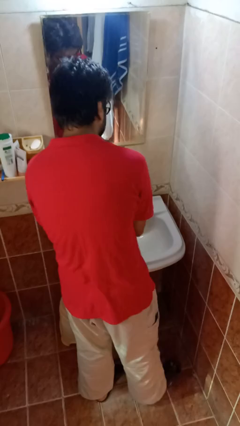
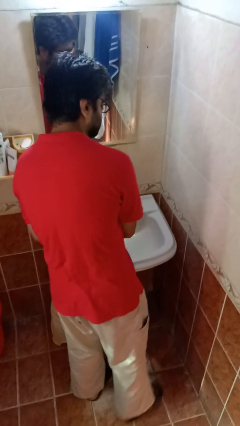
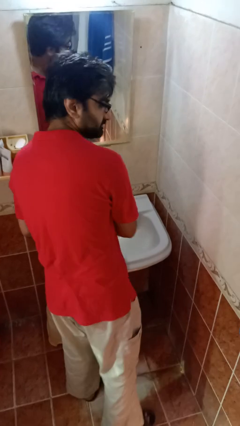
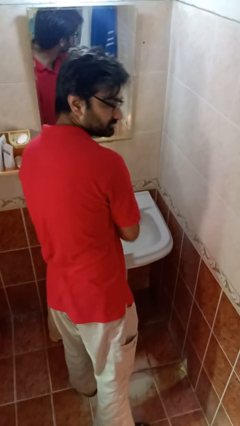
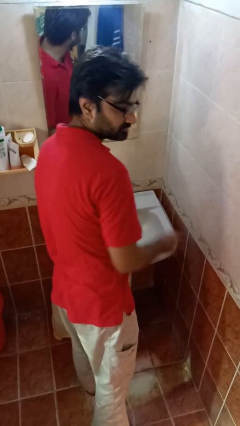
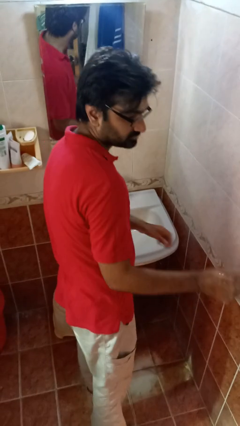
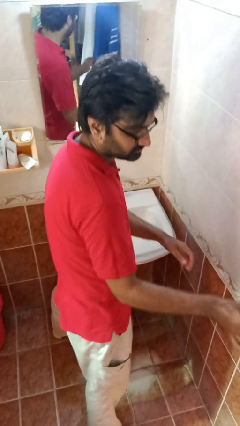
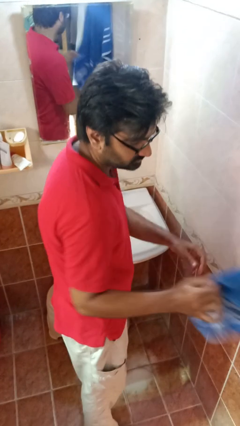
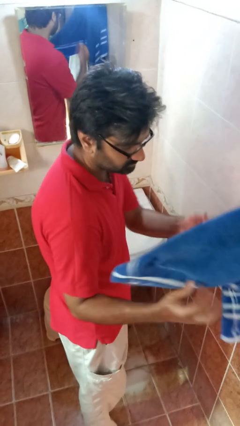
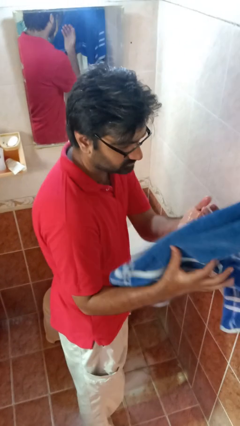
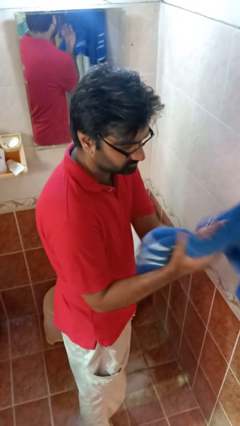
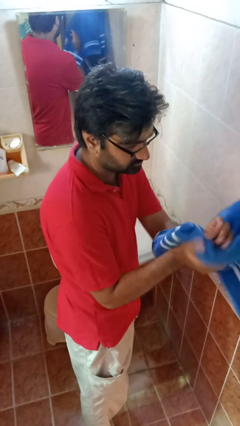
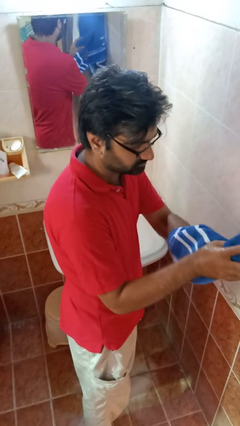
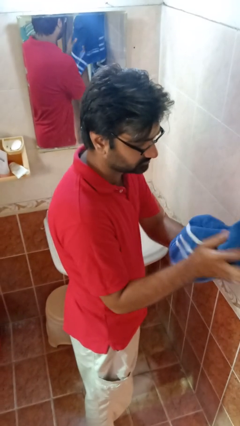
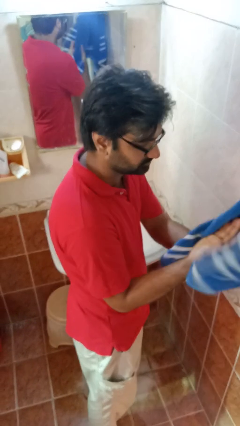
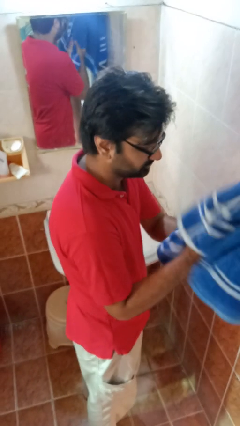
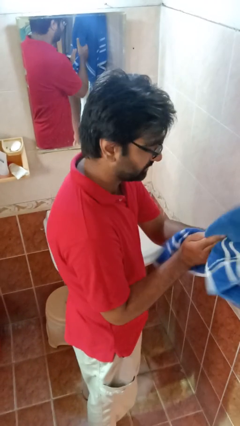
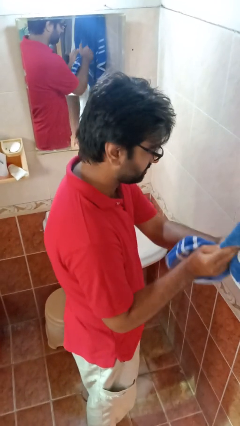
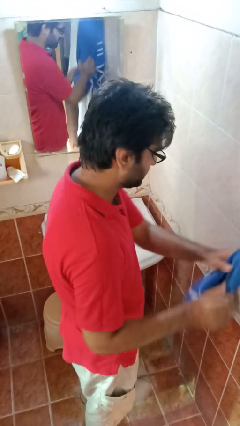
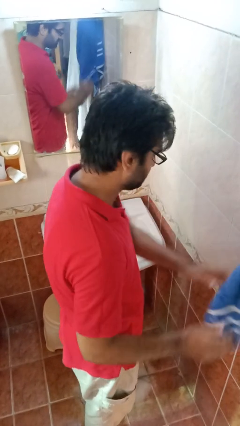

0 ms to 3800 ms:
person dries hands with towel

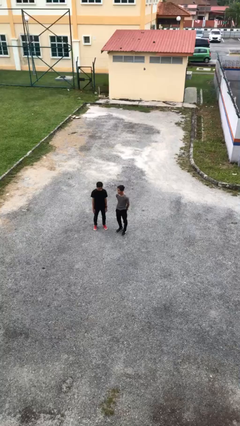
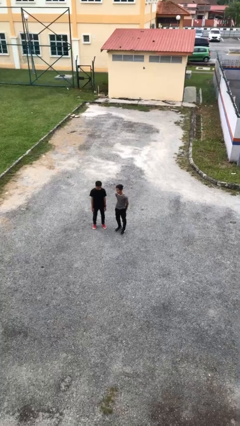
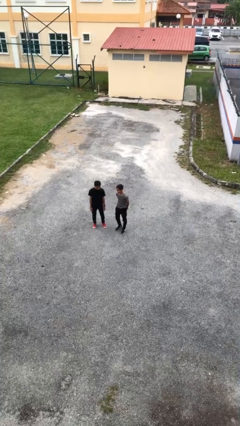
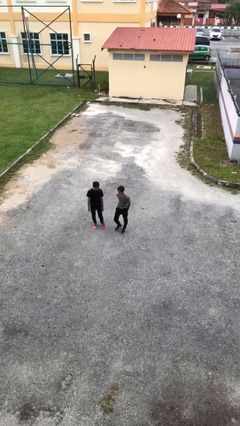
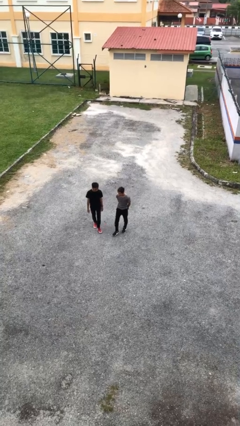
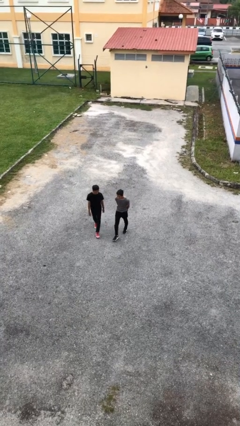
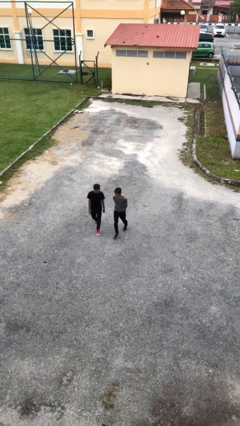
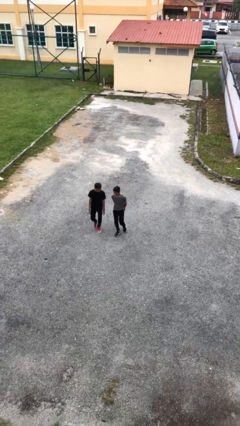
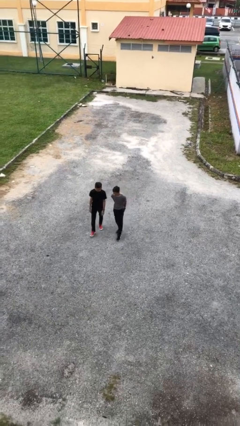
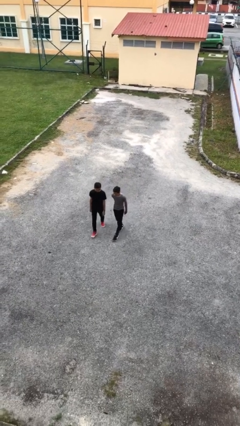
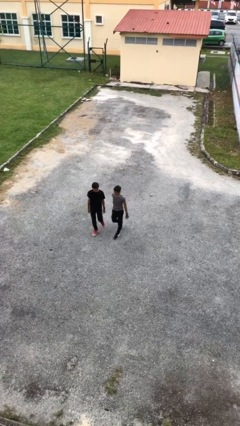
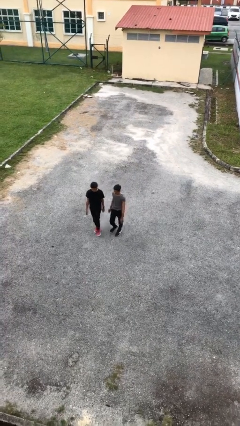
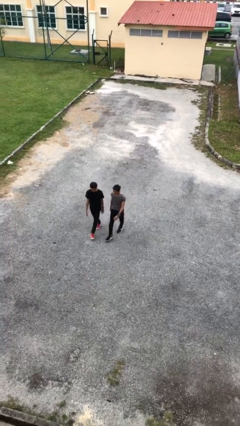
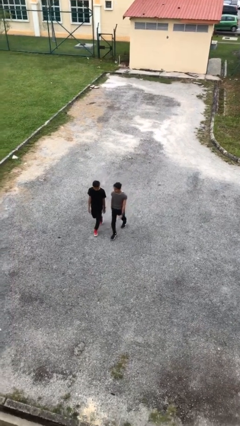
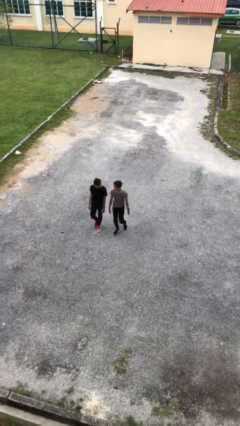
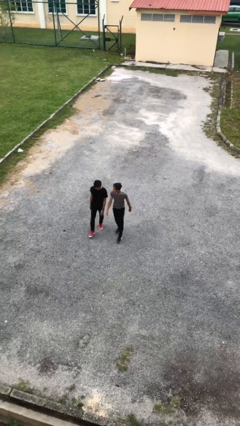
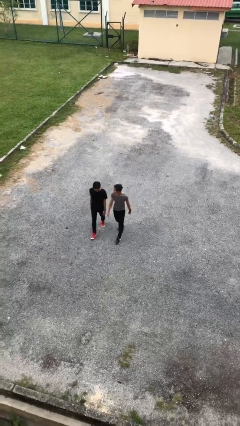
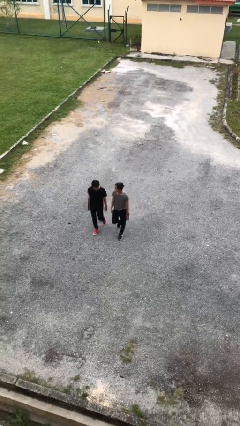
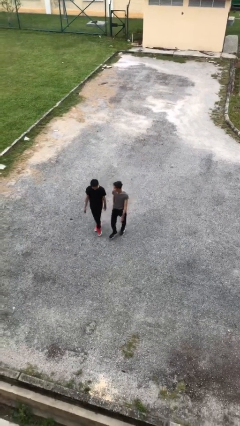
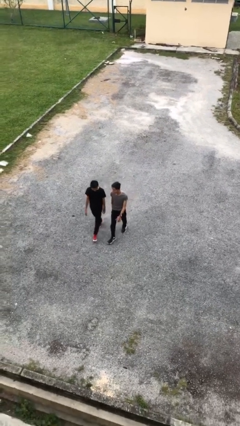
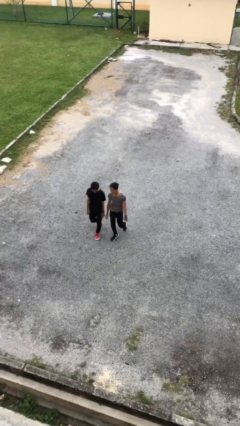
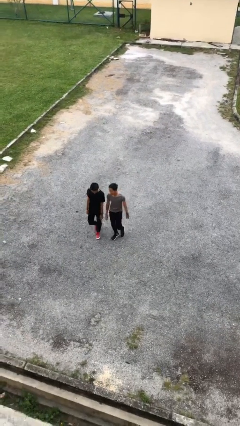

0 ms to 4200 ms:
person talks to person

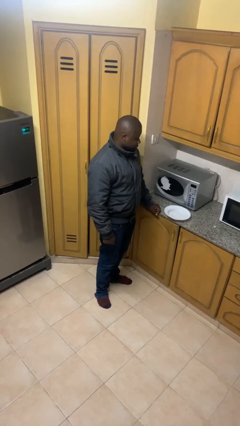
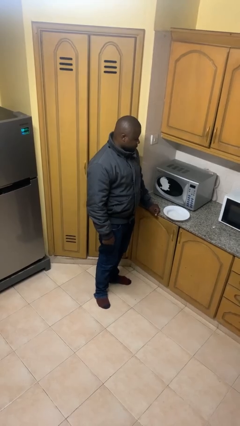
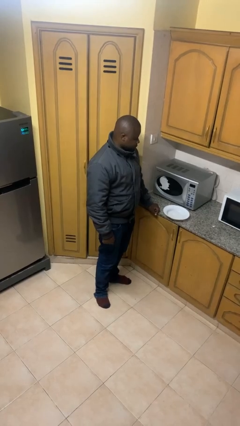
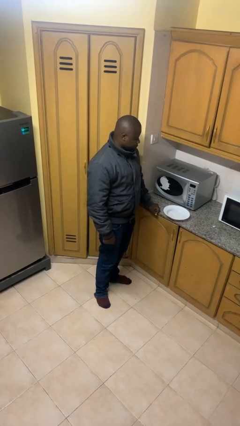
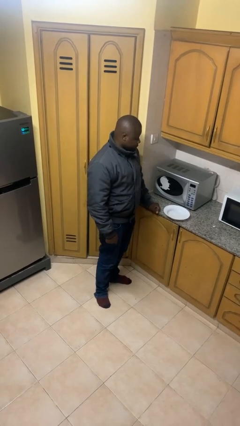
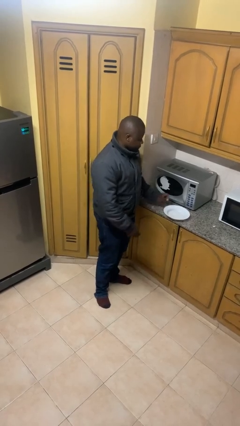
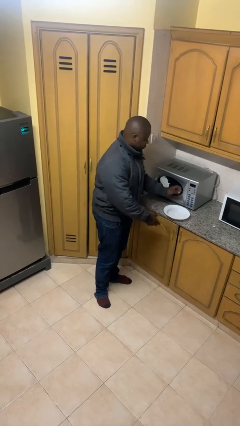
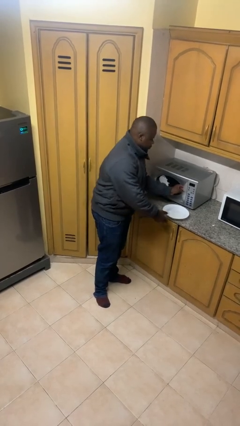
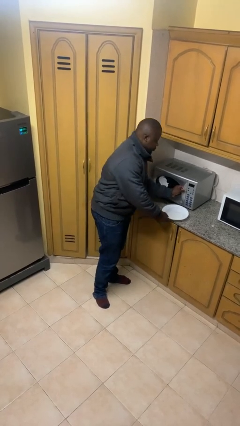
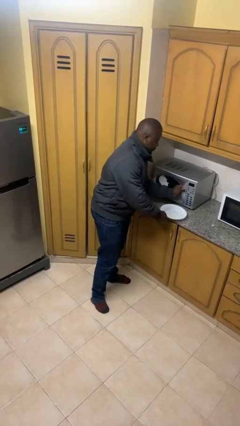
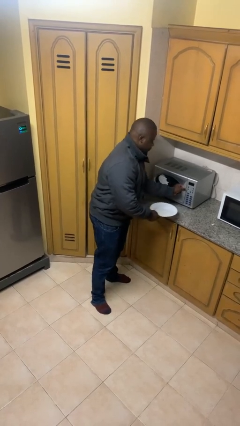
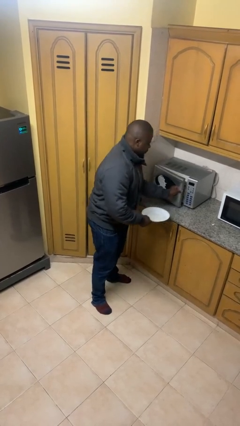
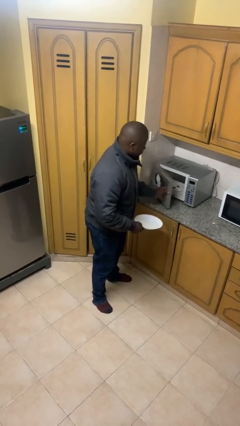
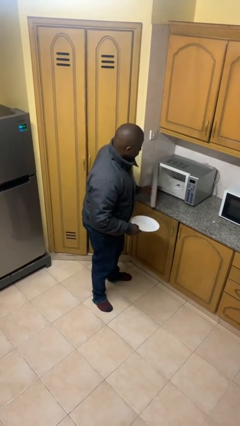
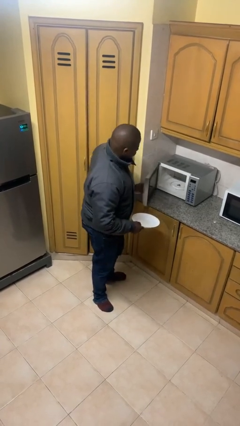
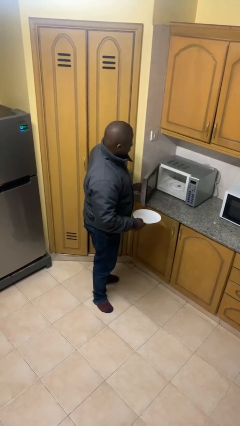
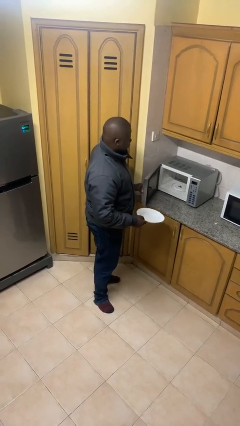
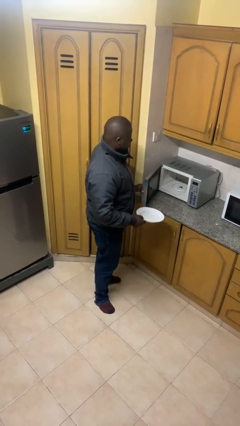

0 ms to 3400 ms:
person opens microwave

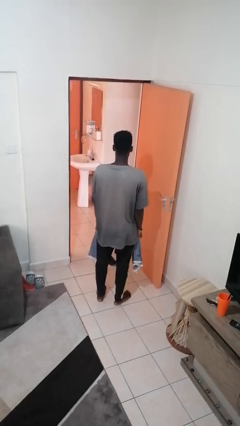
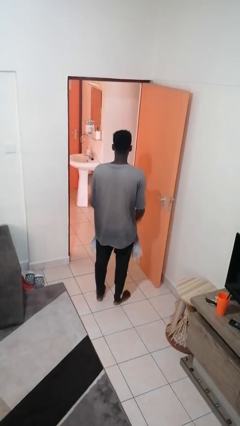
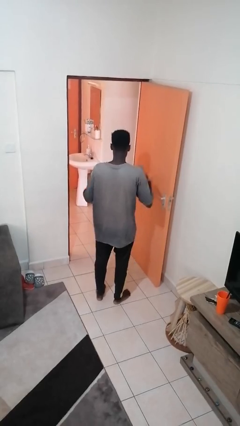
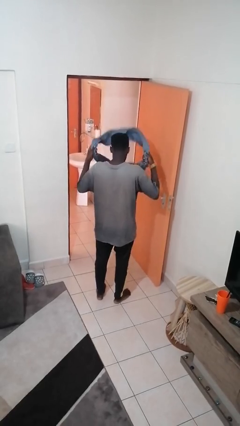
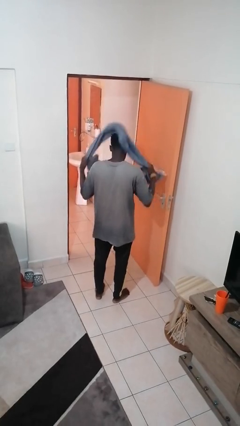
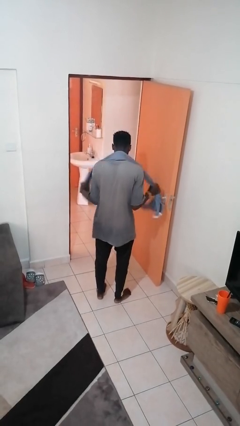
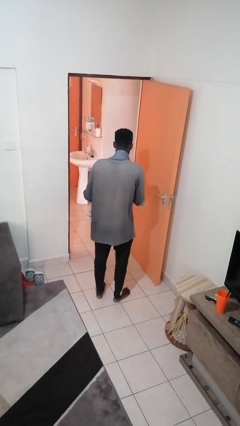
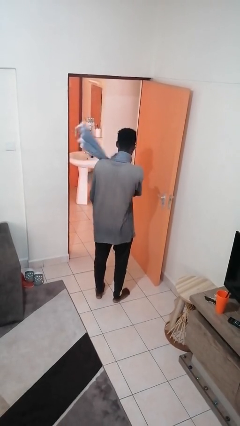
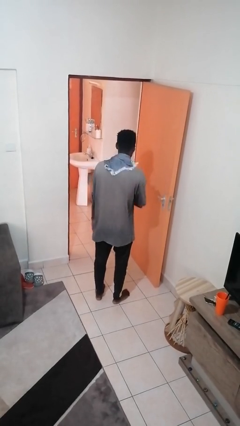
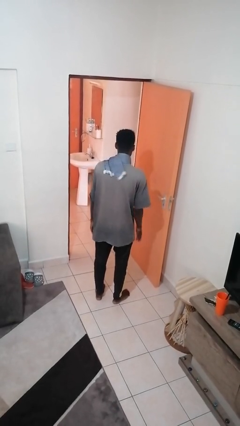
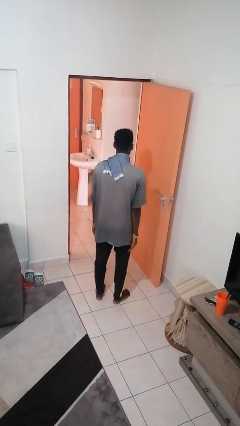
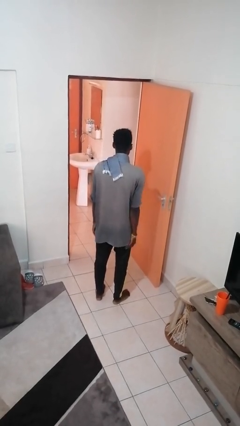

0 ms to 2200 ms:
person puts on scarf

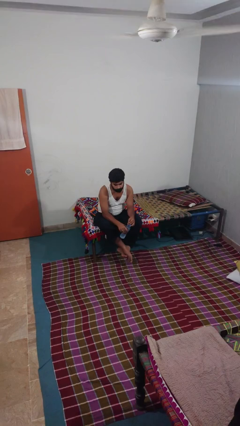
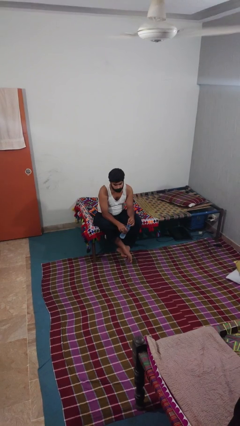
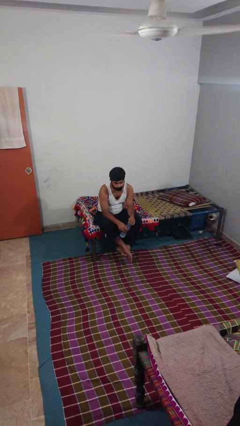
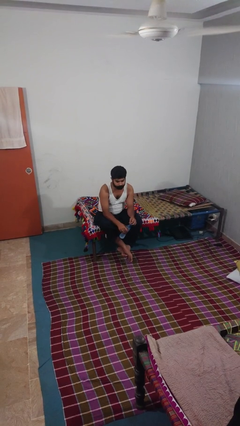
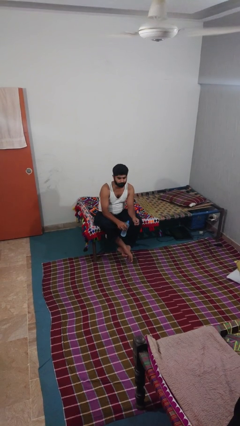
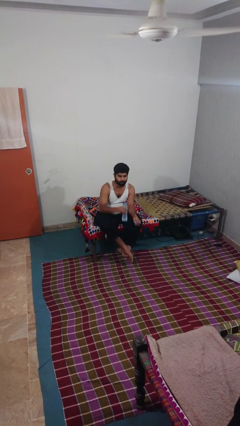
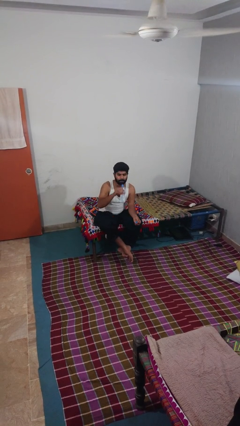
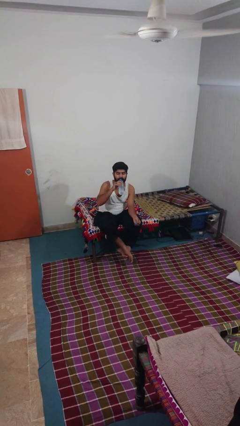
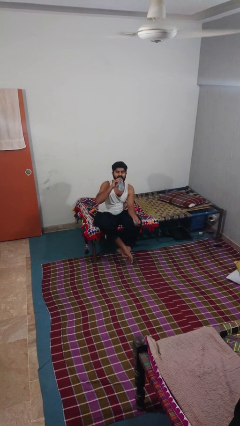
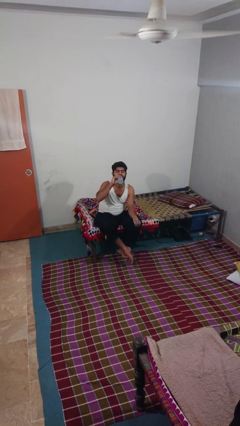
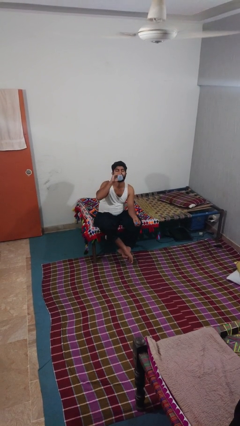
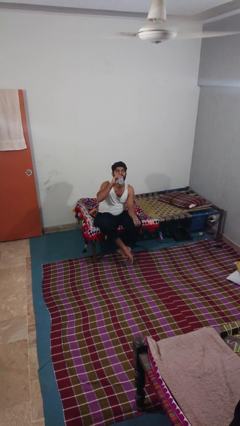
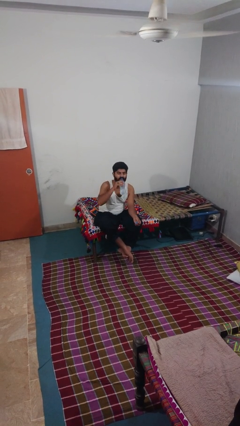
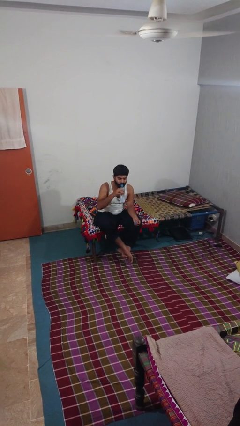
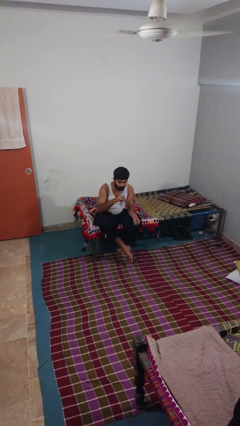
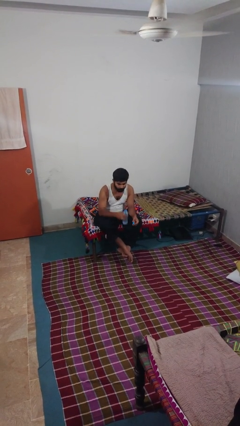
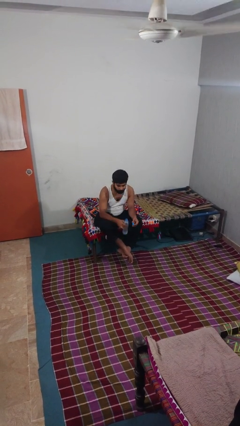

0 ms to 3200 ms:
person drinks from bottle

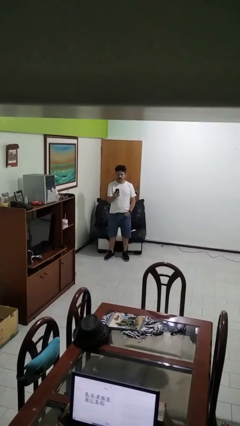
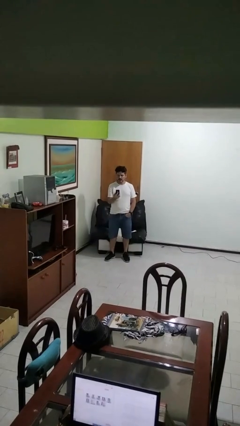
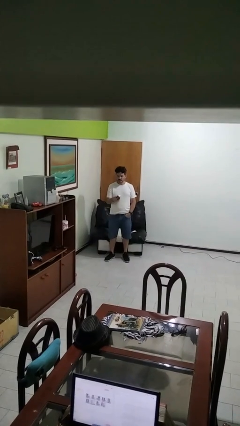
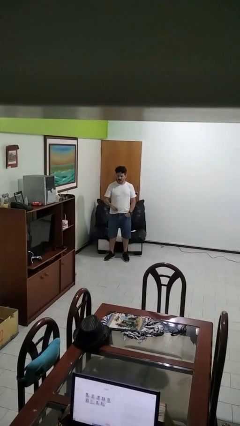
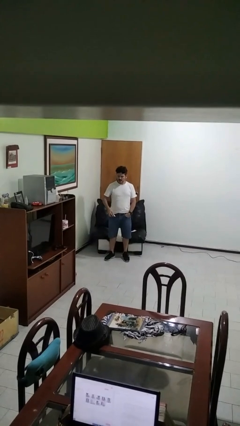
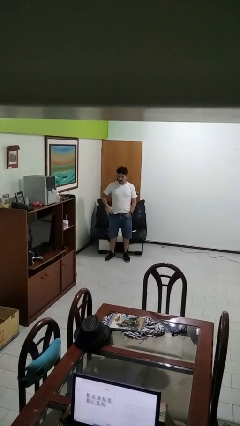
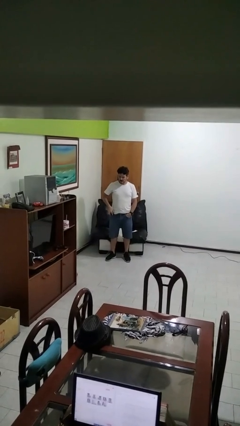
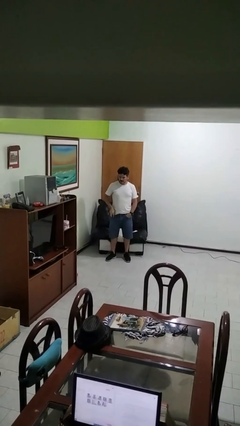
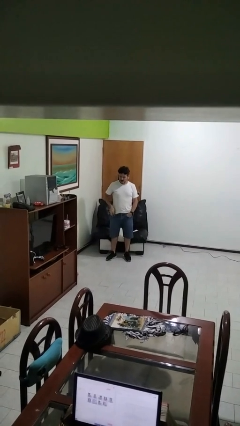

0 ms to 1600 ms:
person puts phone into pocket
